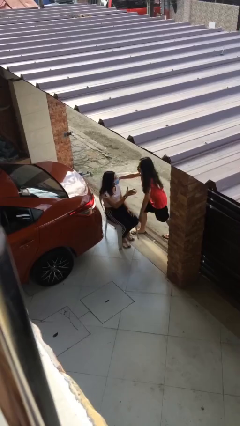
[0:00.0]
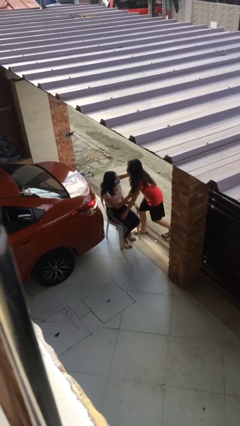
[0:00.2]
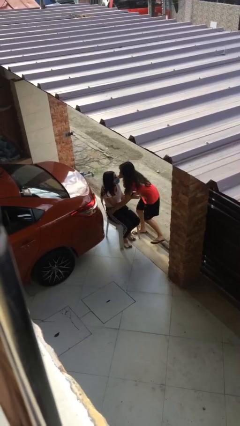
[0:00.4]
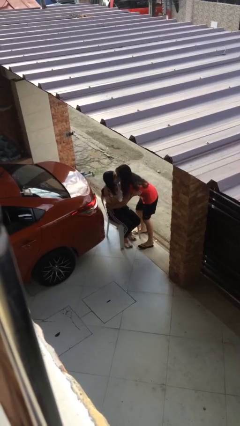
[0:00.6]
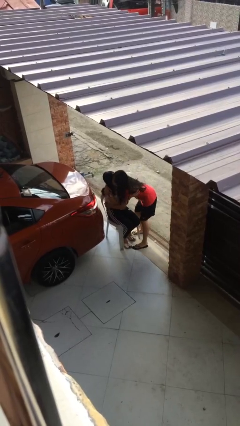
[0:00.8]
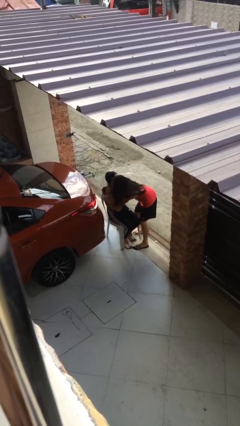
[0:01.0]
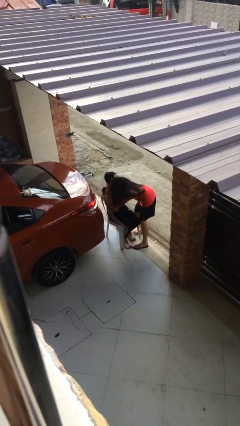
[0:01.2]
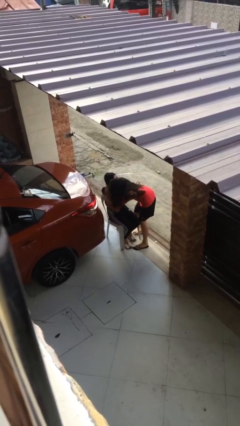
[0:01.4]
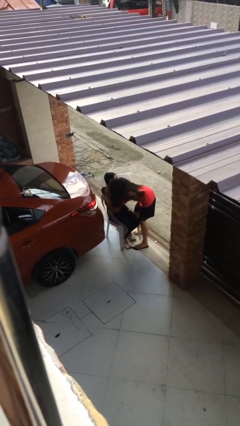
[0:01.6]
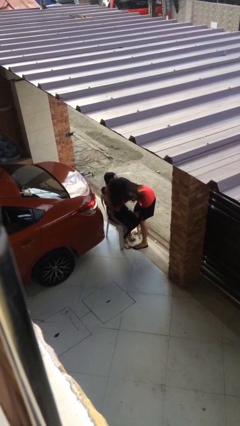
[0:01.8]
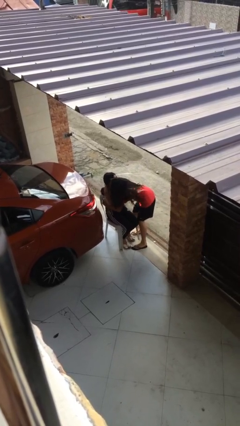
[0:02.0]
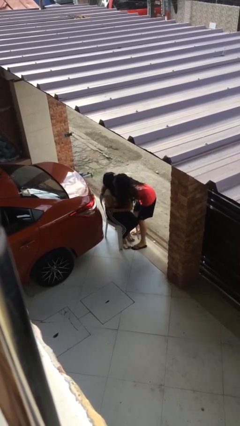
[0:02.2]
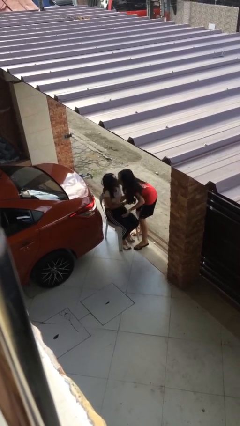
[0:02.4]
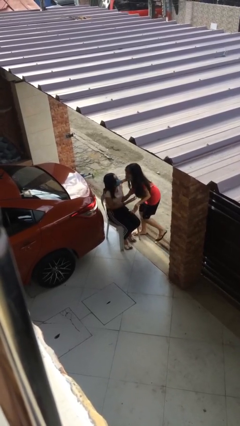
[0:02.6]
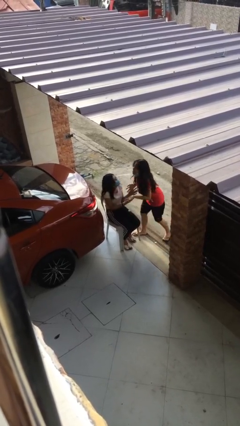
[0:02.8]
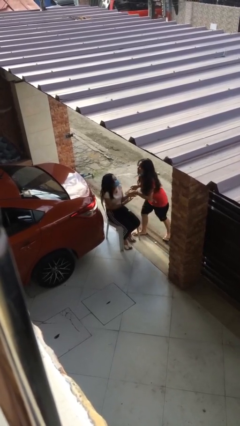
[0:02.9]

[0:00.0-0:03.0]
person embraces person

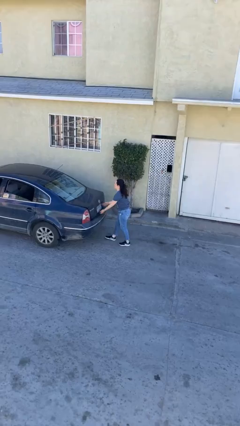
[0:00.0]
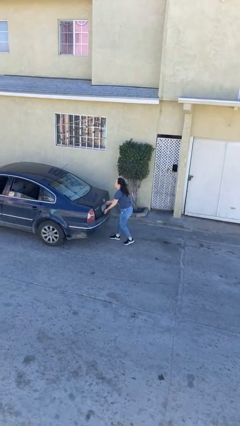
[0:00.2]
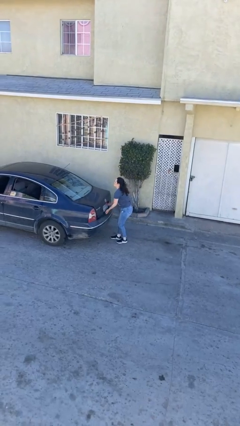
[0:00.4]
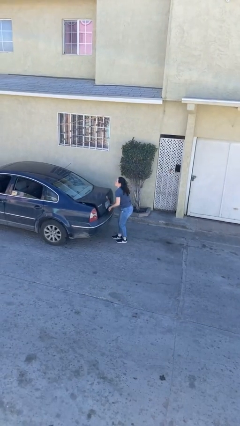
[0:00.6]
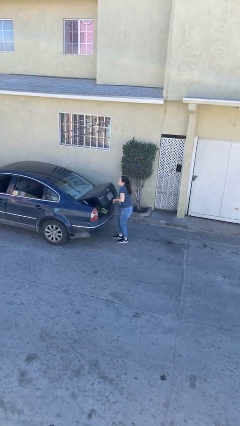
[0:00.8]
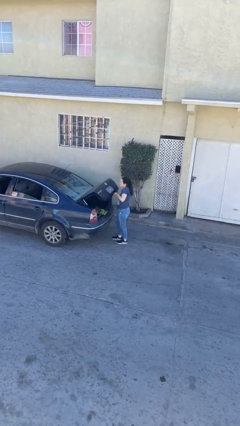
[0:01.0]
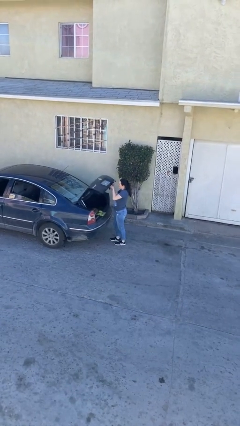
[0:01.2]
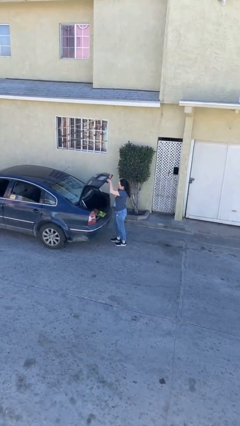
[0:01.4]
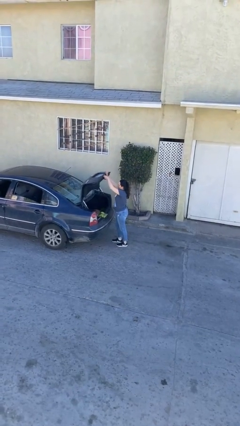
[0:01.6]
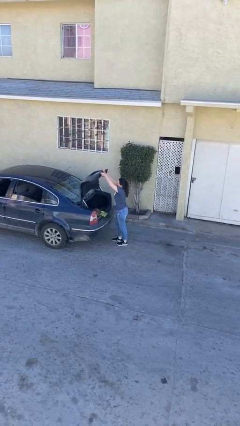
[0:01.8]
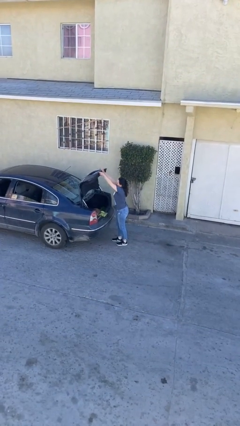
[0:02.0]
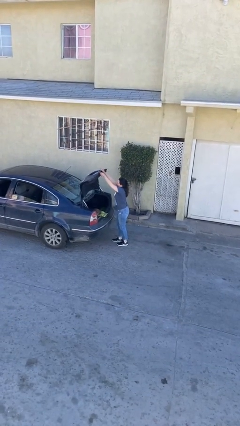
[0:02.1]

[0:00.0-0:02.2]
person opens car trunk

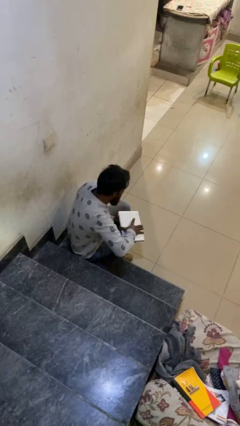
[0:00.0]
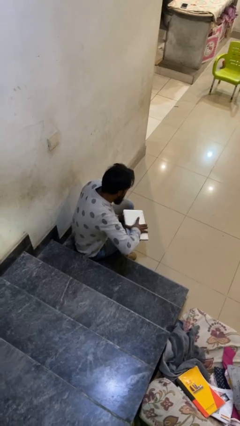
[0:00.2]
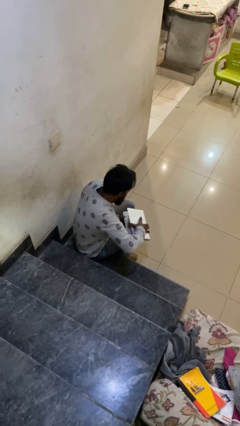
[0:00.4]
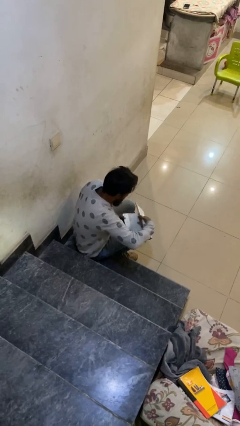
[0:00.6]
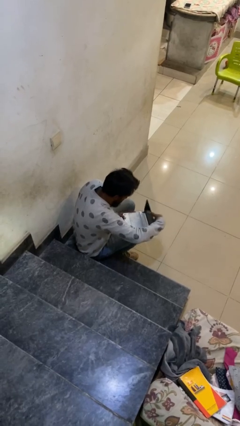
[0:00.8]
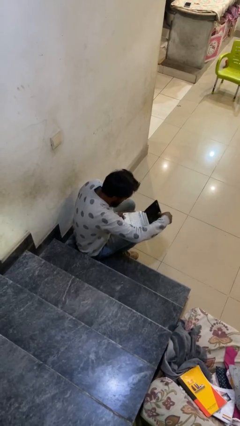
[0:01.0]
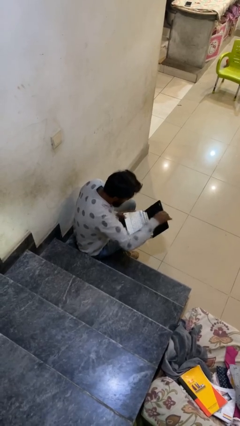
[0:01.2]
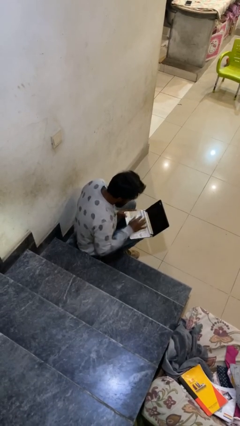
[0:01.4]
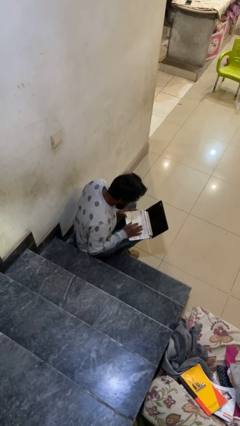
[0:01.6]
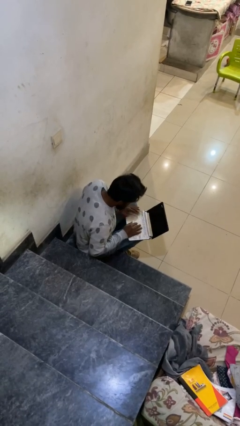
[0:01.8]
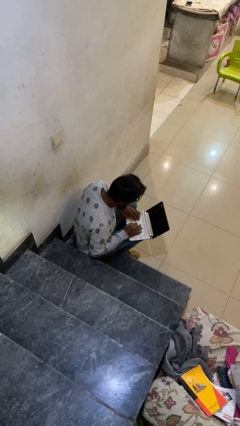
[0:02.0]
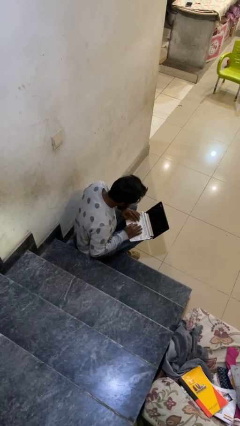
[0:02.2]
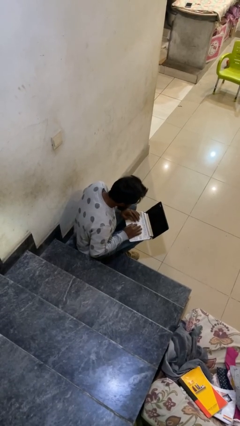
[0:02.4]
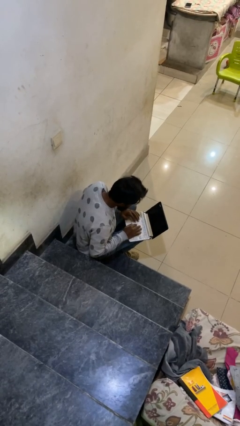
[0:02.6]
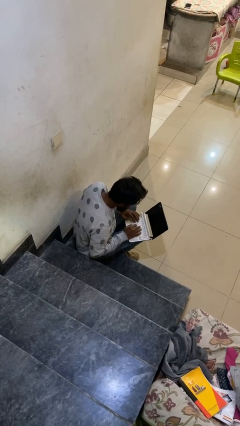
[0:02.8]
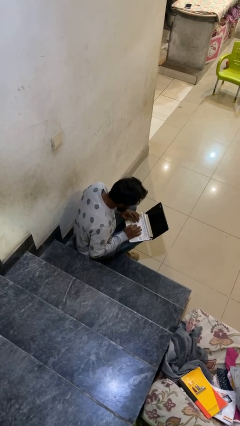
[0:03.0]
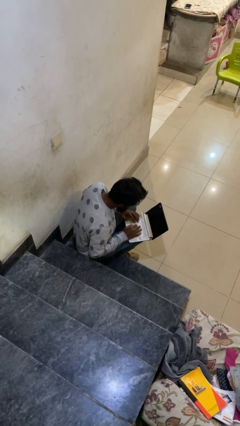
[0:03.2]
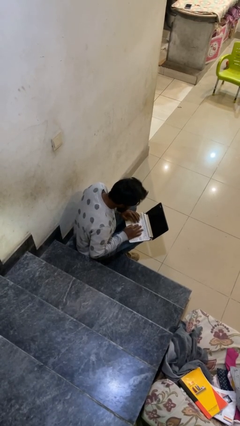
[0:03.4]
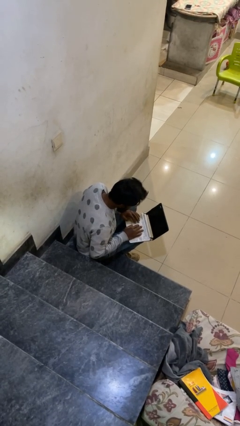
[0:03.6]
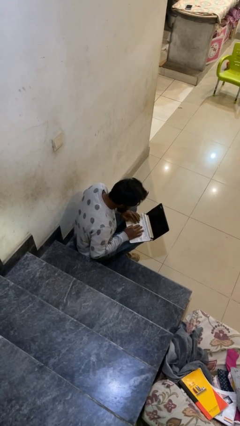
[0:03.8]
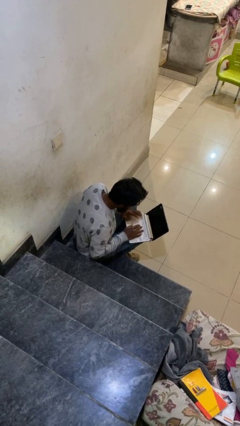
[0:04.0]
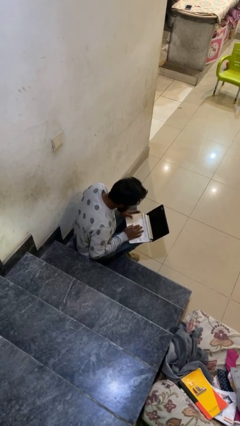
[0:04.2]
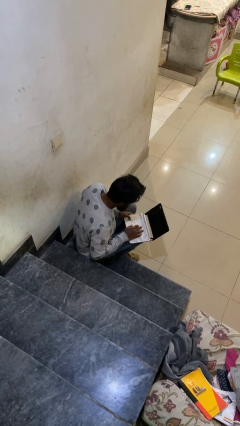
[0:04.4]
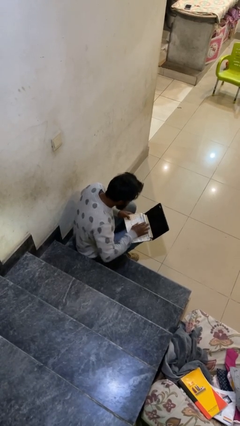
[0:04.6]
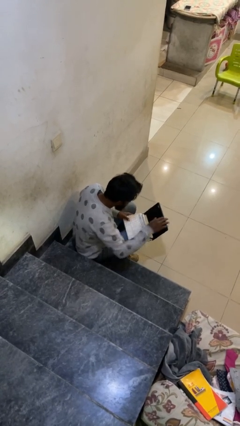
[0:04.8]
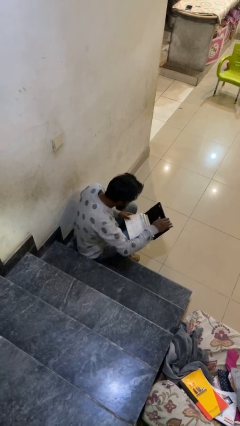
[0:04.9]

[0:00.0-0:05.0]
person interacts with laptop

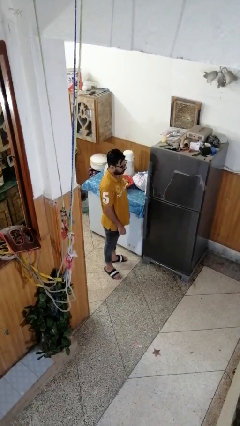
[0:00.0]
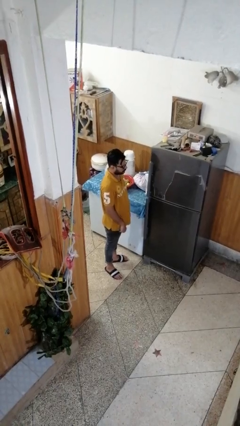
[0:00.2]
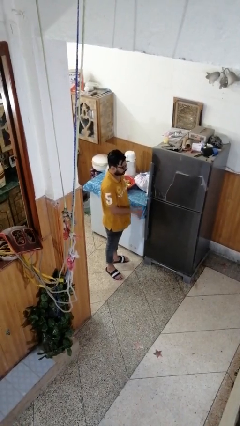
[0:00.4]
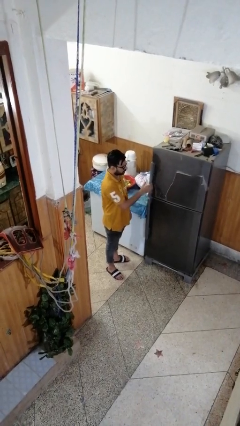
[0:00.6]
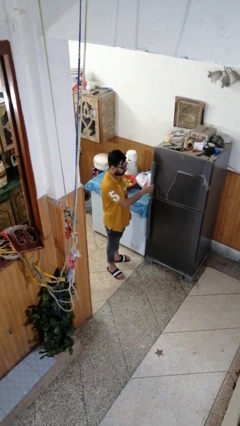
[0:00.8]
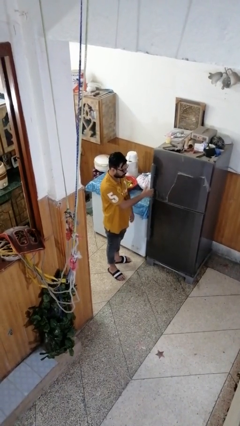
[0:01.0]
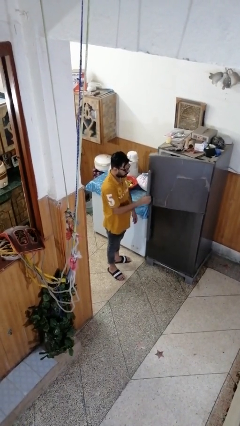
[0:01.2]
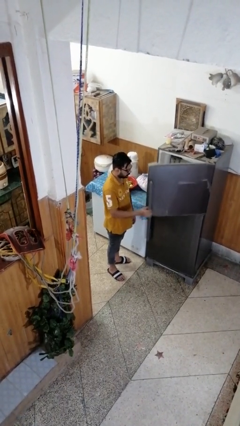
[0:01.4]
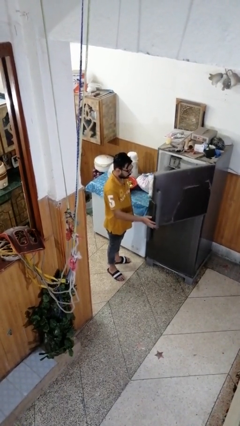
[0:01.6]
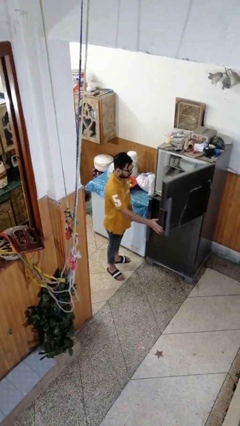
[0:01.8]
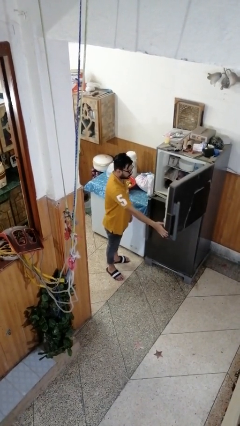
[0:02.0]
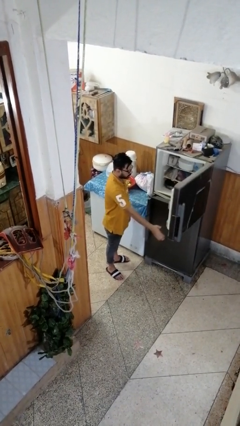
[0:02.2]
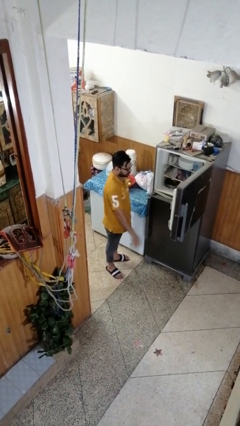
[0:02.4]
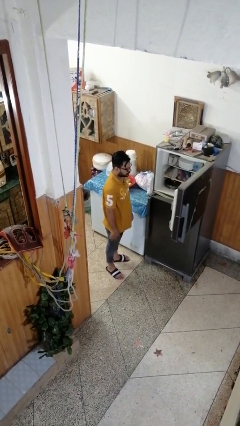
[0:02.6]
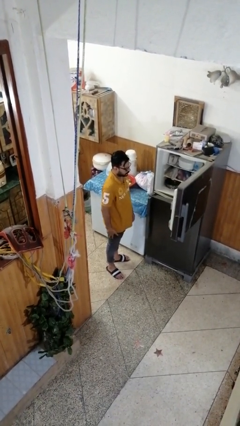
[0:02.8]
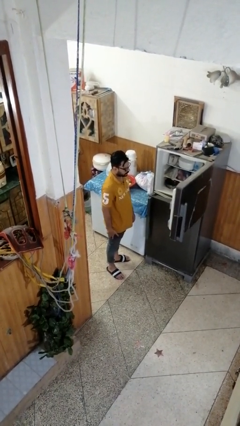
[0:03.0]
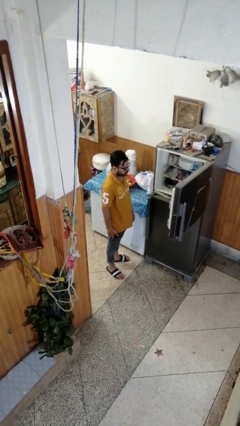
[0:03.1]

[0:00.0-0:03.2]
person opens refrigerator

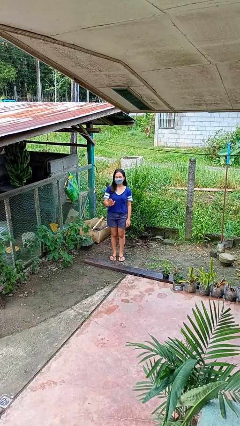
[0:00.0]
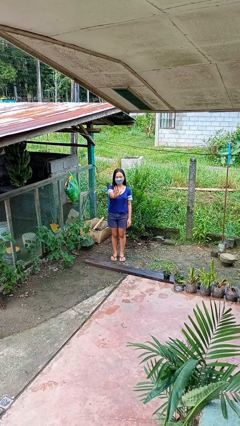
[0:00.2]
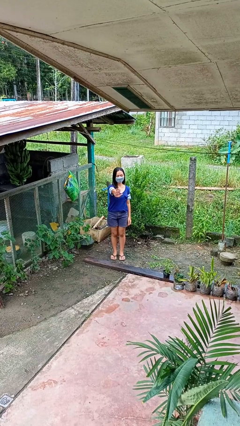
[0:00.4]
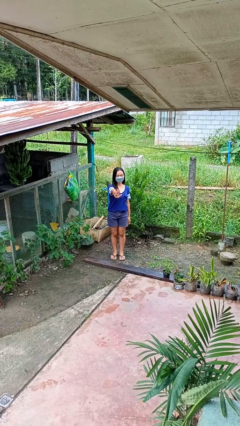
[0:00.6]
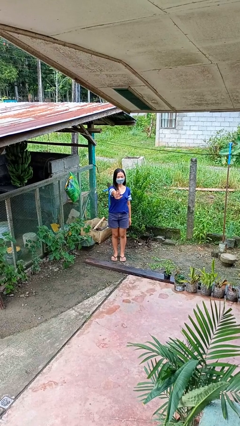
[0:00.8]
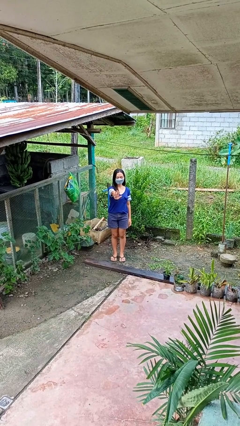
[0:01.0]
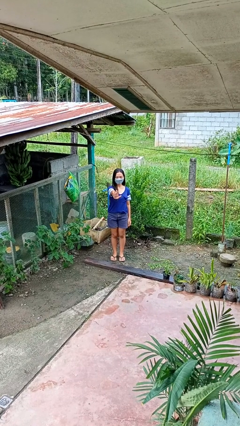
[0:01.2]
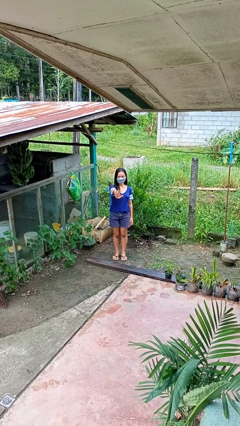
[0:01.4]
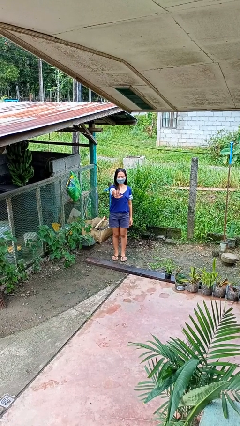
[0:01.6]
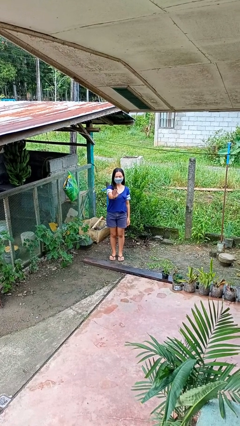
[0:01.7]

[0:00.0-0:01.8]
person gestures stop

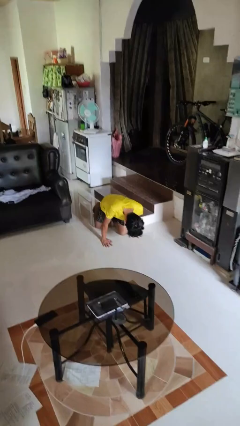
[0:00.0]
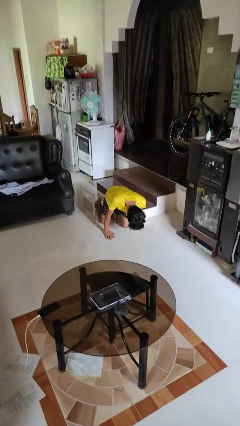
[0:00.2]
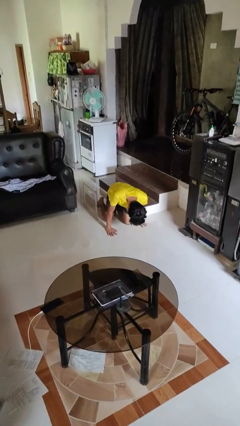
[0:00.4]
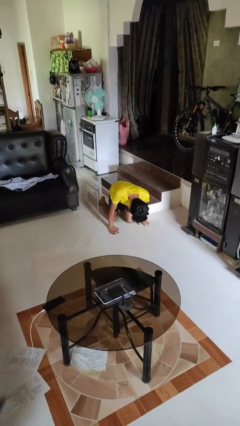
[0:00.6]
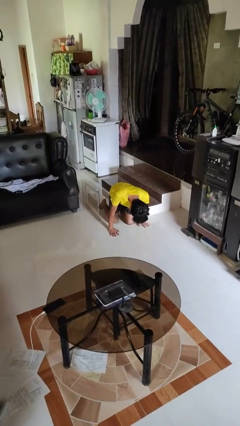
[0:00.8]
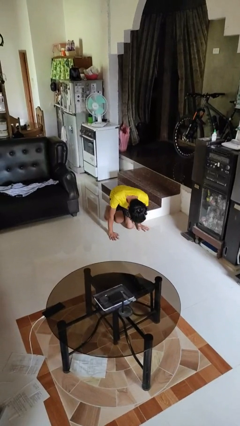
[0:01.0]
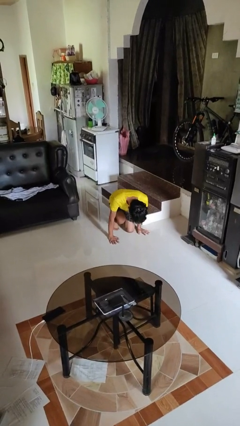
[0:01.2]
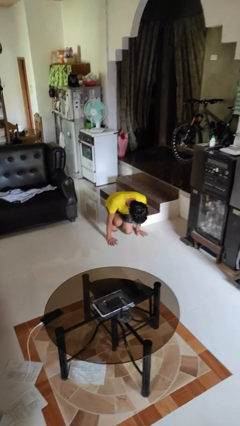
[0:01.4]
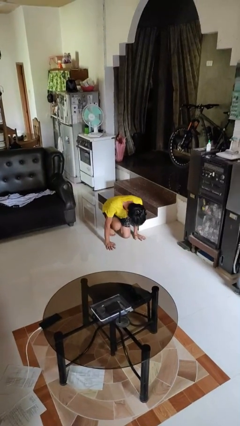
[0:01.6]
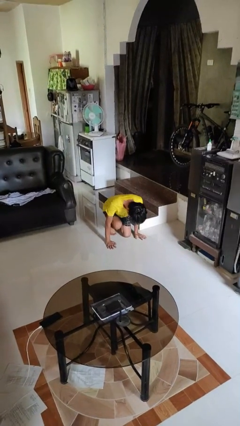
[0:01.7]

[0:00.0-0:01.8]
person lies down on floor

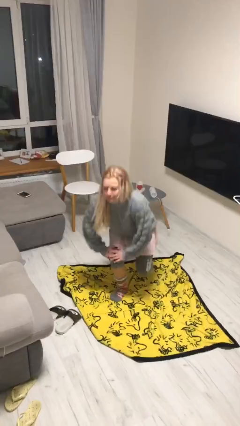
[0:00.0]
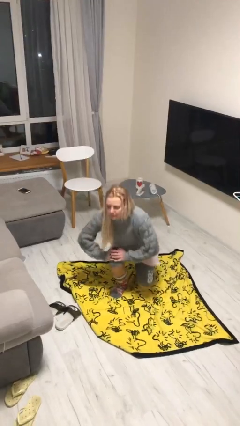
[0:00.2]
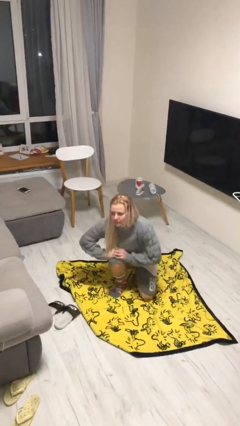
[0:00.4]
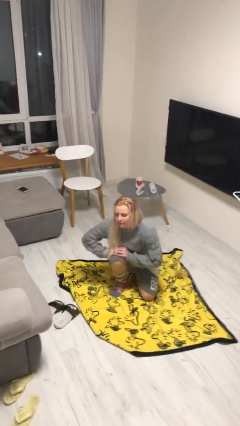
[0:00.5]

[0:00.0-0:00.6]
person sits down
